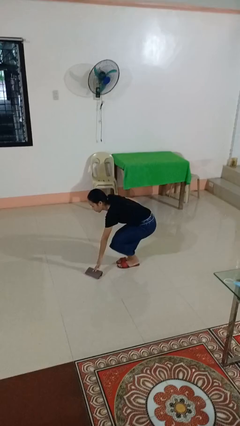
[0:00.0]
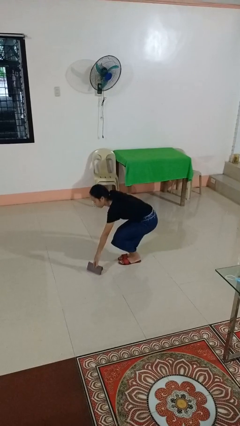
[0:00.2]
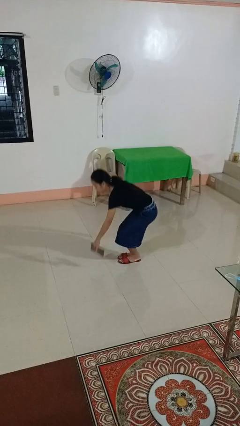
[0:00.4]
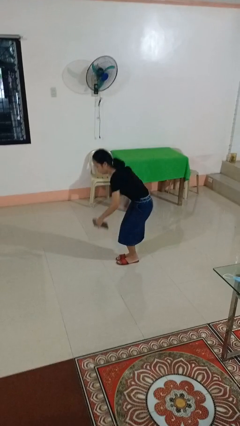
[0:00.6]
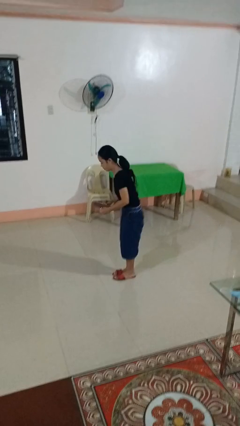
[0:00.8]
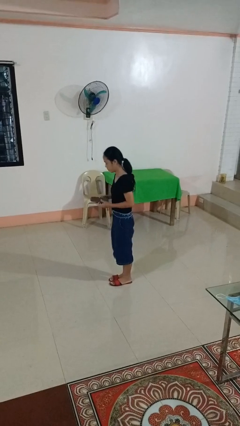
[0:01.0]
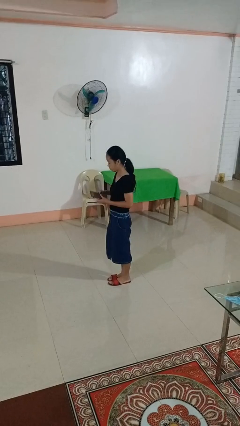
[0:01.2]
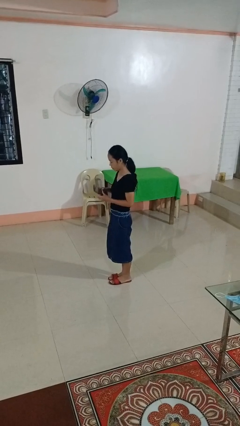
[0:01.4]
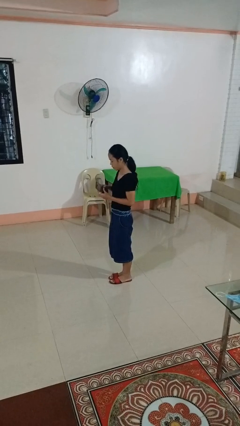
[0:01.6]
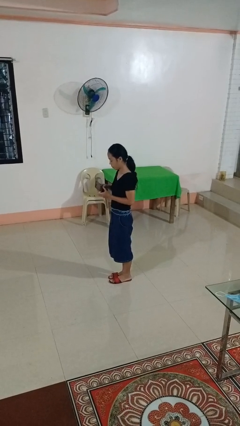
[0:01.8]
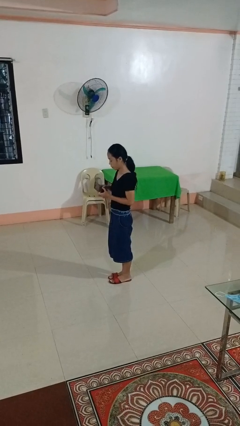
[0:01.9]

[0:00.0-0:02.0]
person picks up object from floor

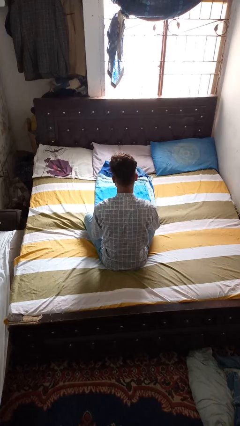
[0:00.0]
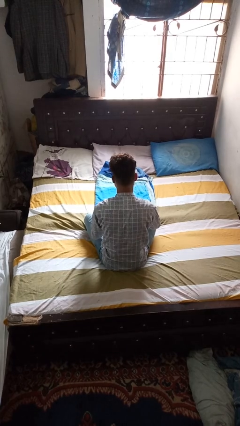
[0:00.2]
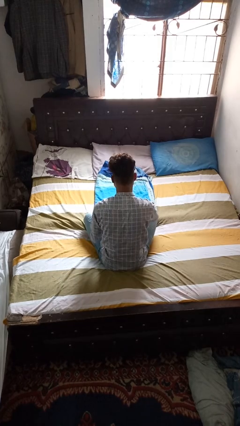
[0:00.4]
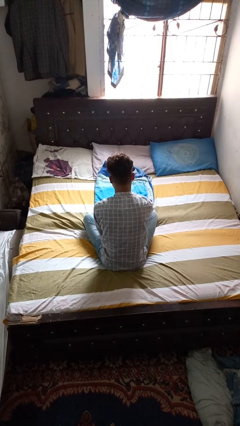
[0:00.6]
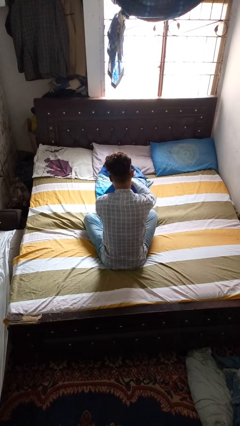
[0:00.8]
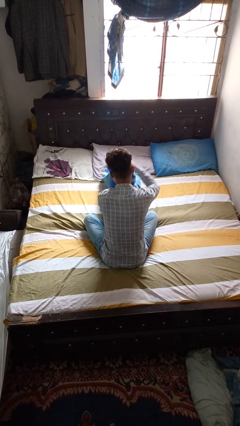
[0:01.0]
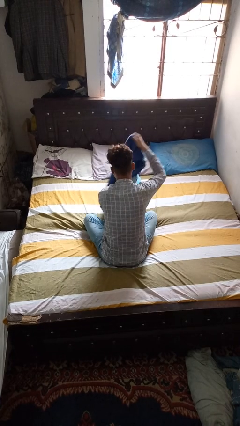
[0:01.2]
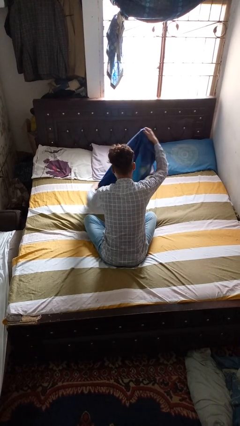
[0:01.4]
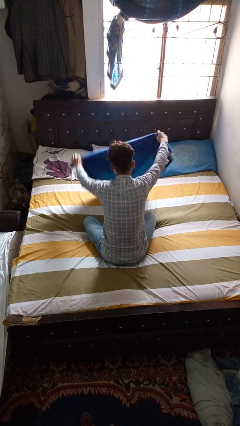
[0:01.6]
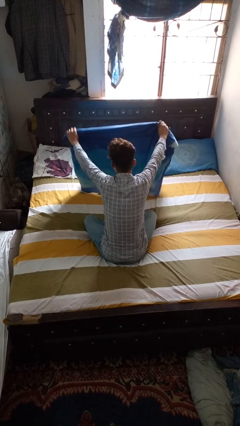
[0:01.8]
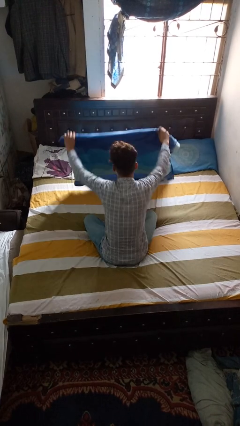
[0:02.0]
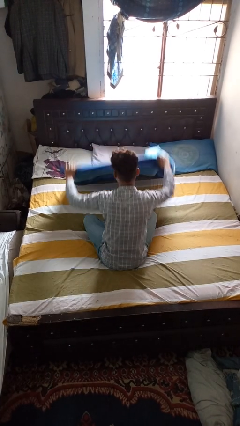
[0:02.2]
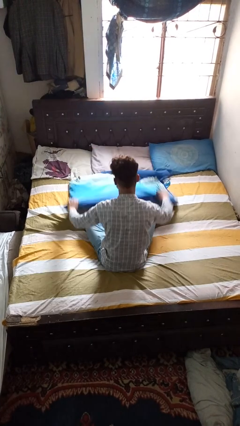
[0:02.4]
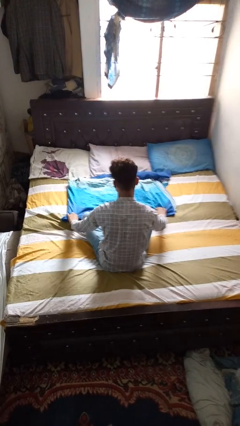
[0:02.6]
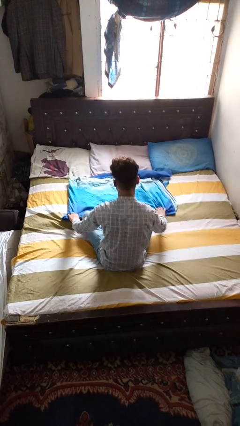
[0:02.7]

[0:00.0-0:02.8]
person unfolds blanket

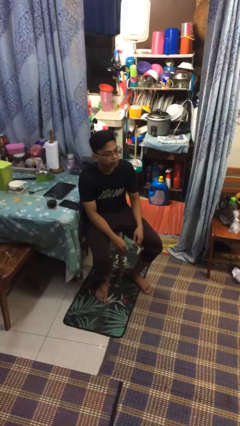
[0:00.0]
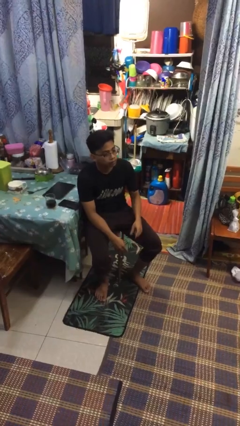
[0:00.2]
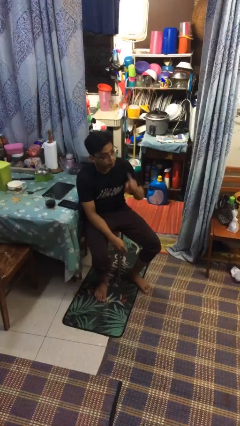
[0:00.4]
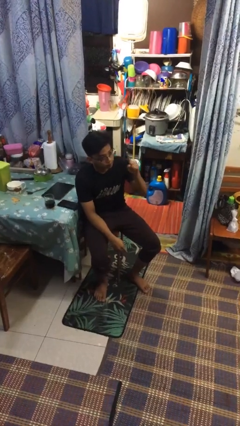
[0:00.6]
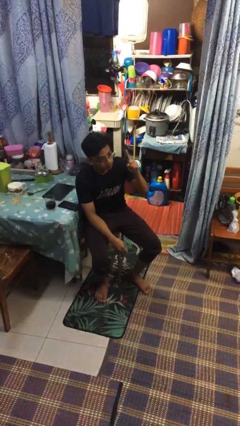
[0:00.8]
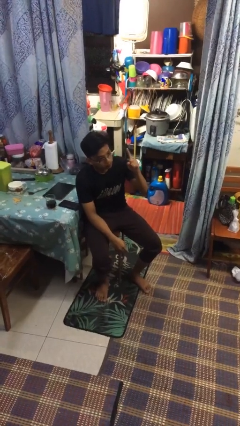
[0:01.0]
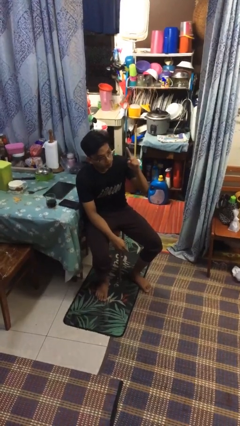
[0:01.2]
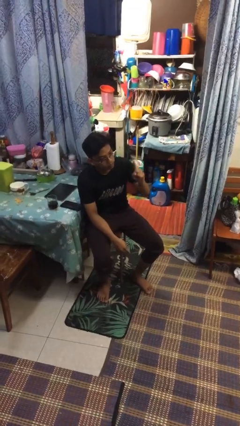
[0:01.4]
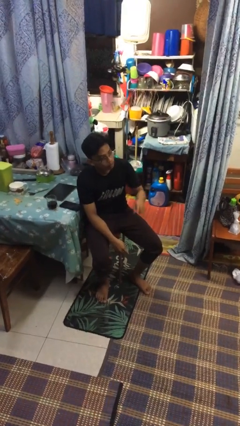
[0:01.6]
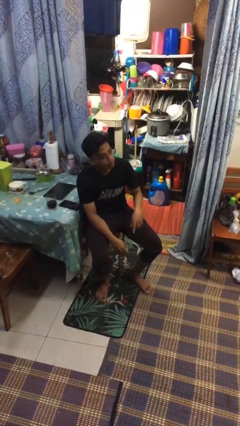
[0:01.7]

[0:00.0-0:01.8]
person gestures number one

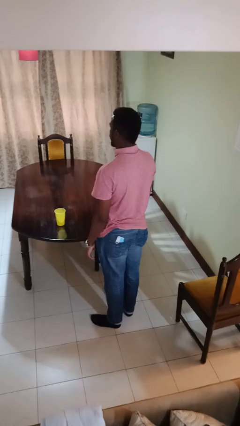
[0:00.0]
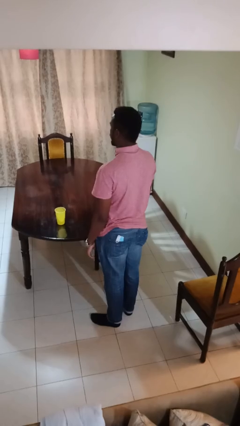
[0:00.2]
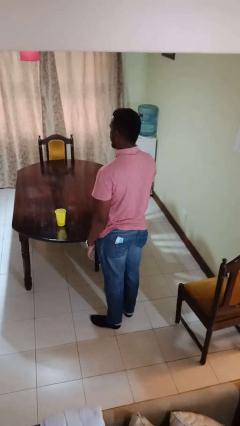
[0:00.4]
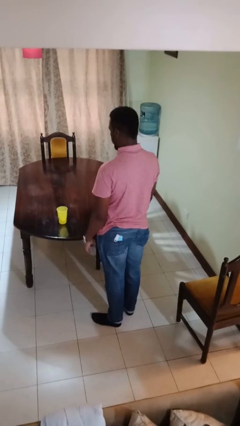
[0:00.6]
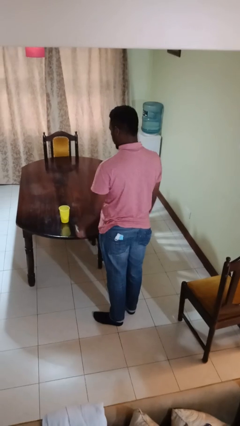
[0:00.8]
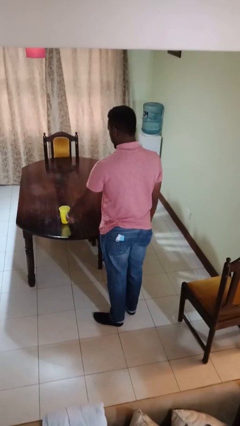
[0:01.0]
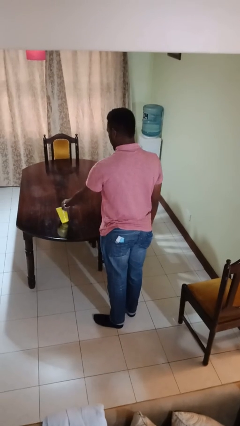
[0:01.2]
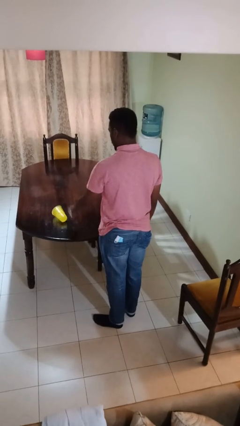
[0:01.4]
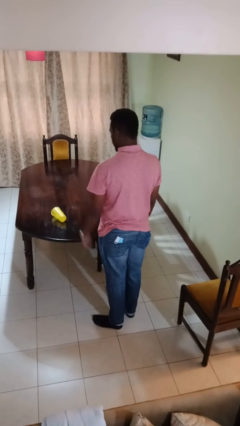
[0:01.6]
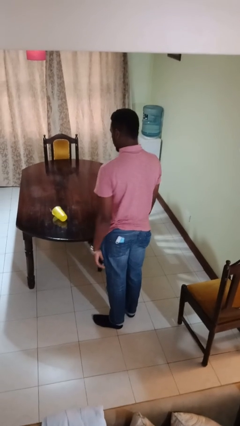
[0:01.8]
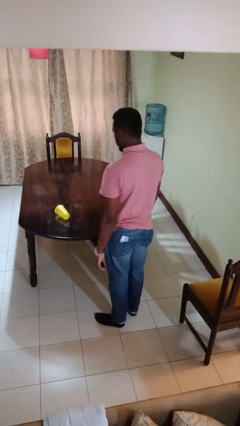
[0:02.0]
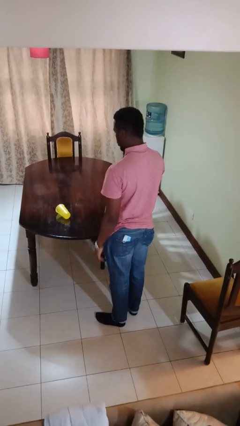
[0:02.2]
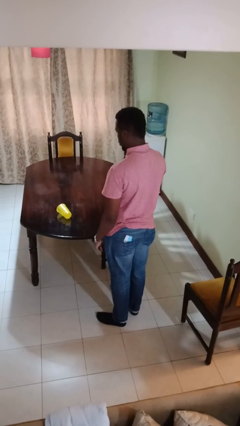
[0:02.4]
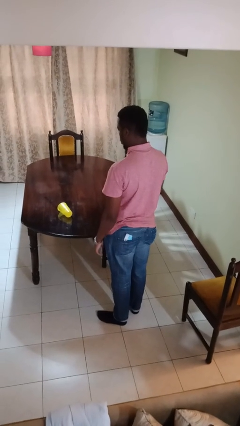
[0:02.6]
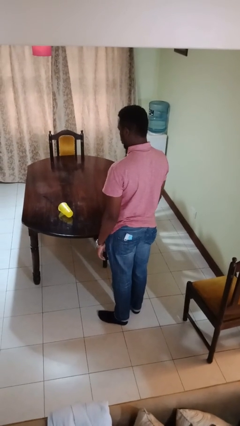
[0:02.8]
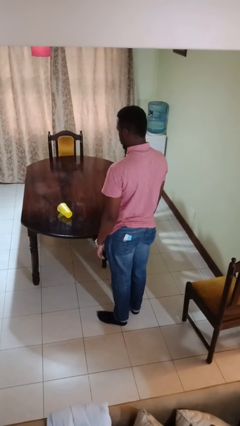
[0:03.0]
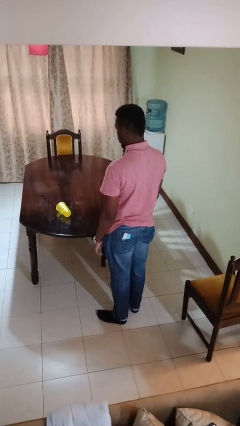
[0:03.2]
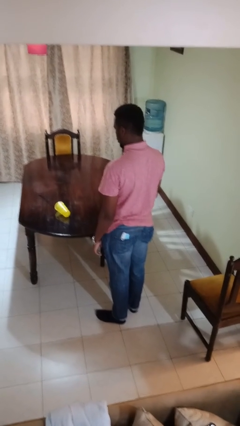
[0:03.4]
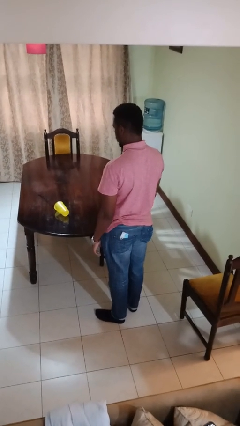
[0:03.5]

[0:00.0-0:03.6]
person spills on table

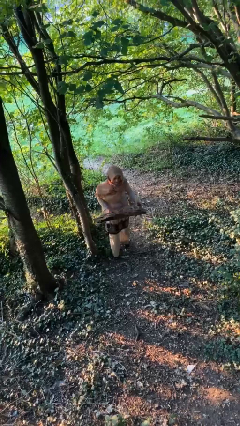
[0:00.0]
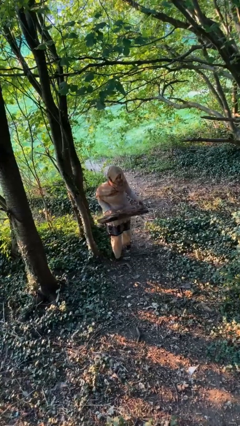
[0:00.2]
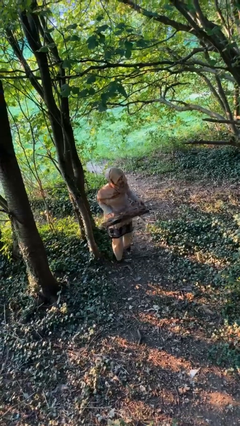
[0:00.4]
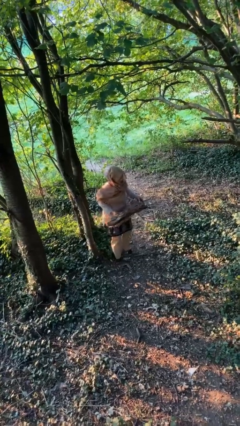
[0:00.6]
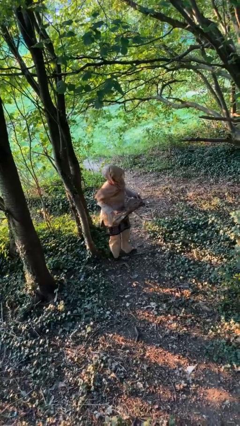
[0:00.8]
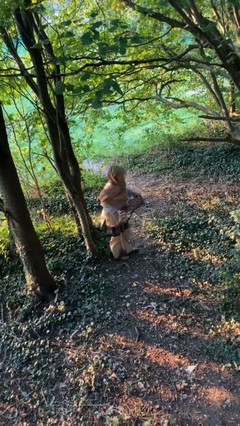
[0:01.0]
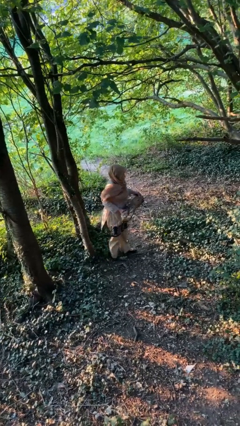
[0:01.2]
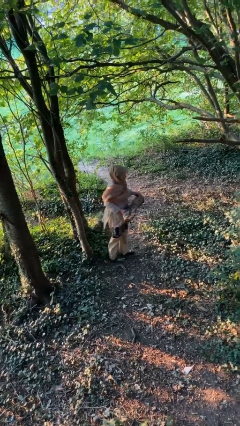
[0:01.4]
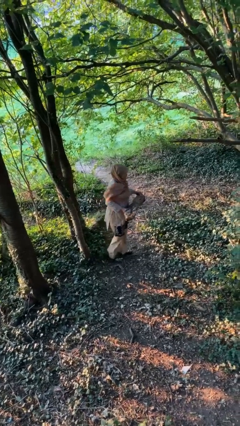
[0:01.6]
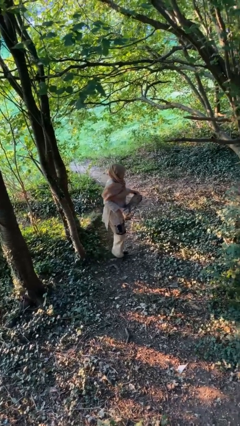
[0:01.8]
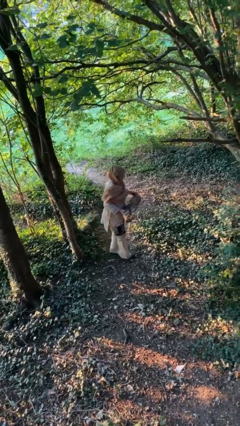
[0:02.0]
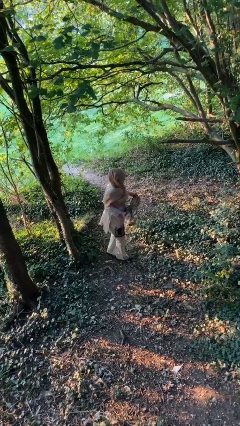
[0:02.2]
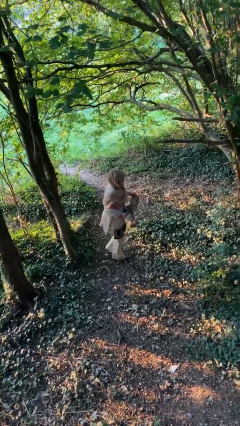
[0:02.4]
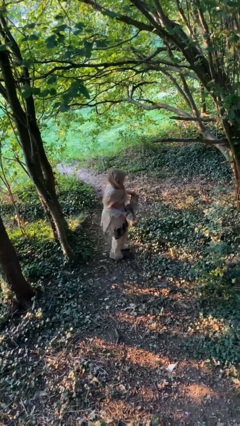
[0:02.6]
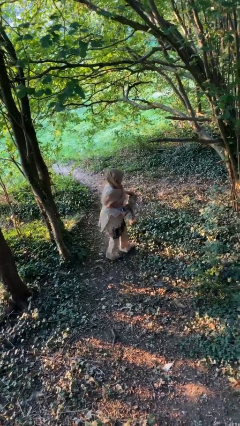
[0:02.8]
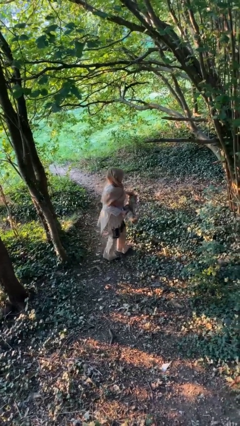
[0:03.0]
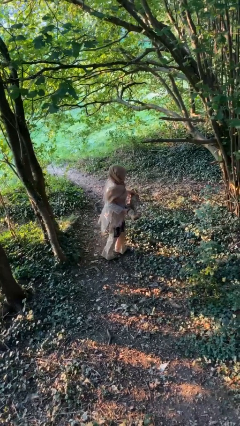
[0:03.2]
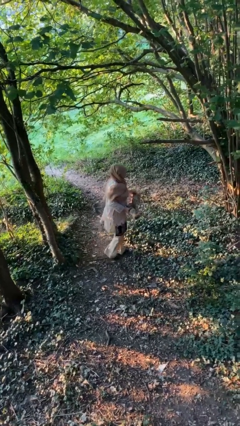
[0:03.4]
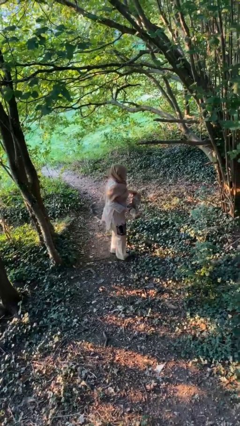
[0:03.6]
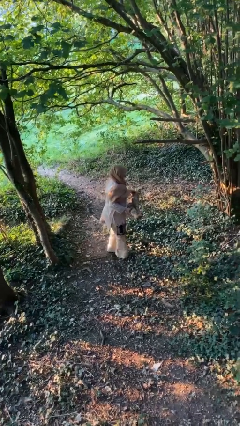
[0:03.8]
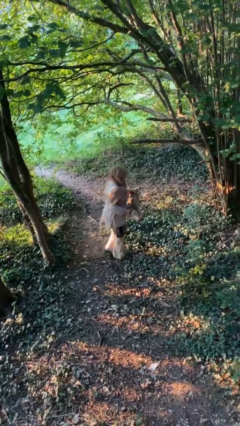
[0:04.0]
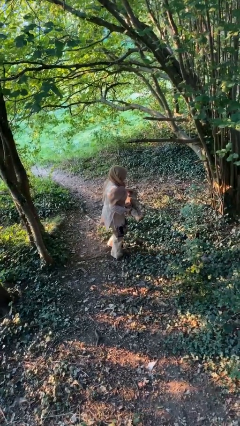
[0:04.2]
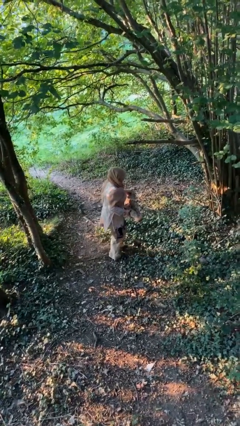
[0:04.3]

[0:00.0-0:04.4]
person carries heavy object

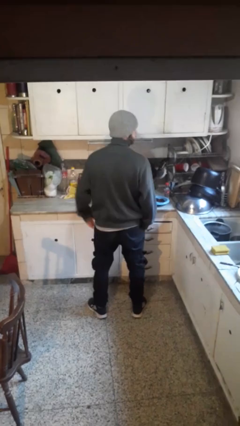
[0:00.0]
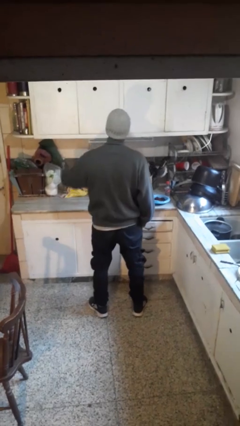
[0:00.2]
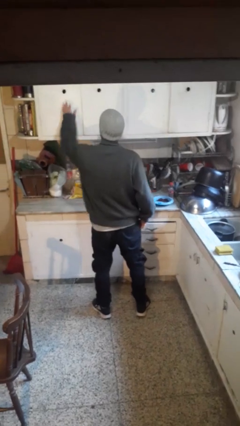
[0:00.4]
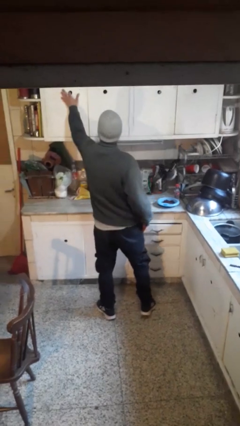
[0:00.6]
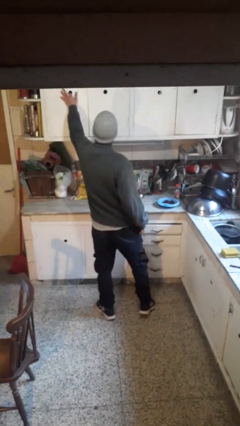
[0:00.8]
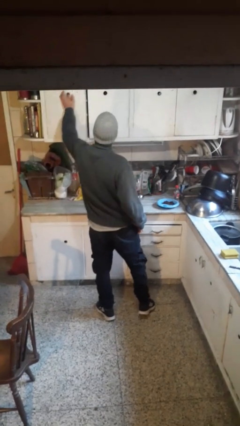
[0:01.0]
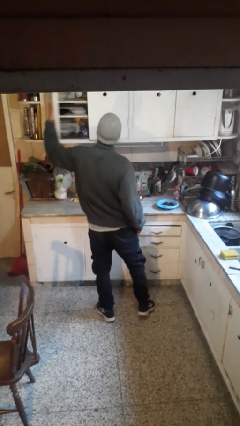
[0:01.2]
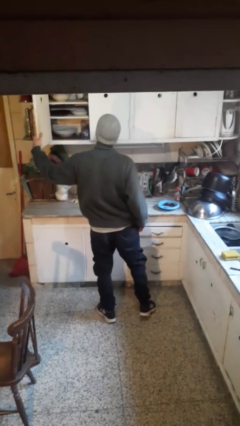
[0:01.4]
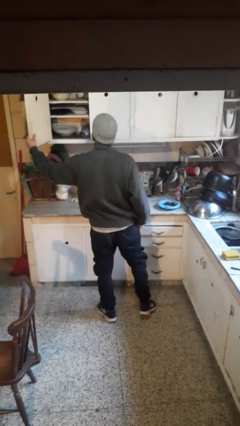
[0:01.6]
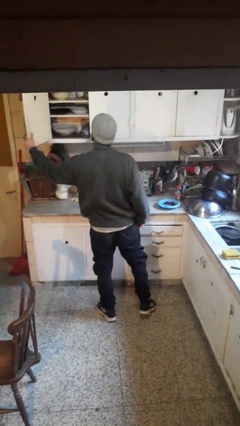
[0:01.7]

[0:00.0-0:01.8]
person opens cabinet

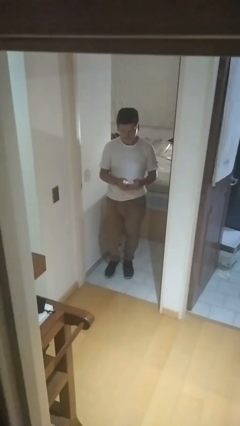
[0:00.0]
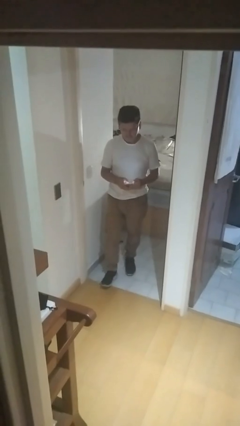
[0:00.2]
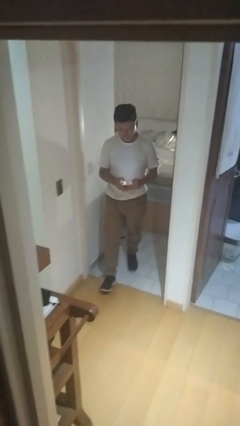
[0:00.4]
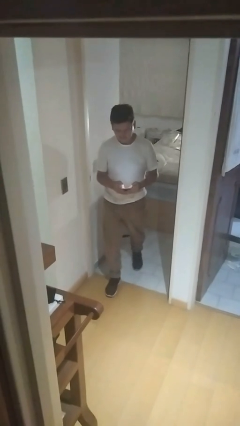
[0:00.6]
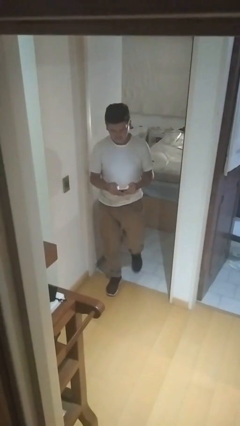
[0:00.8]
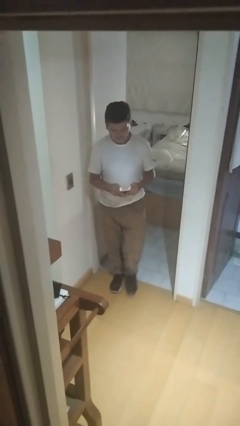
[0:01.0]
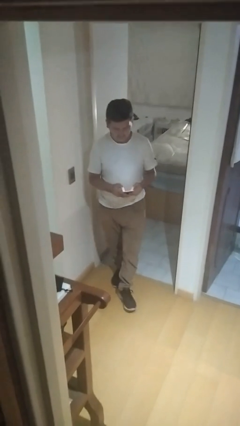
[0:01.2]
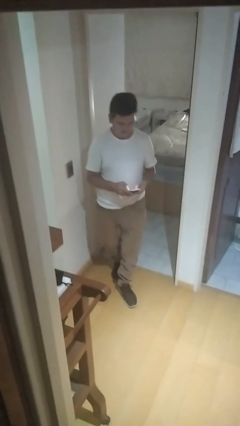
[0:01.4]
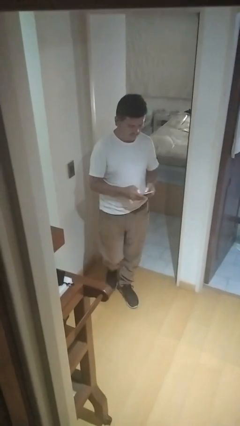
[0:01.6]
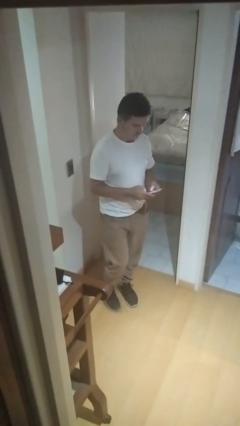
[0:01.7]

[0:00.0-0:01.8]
person enters scene through structure
